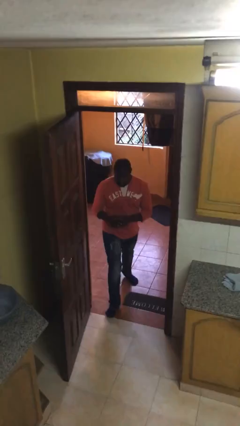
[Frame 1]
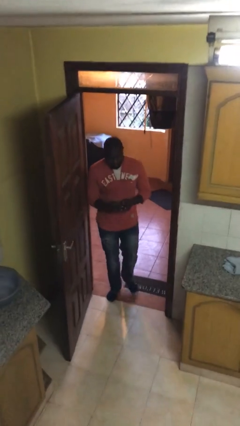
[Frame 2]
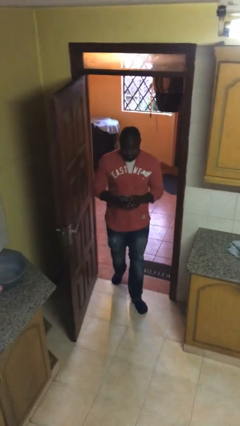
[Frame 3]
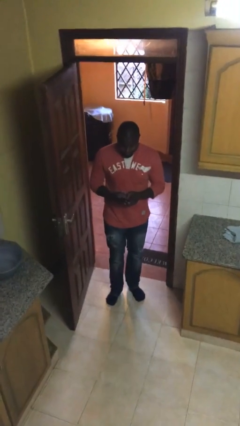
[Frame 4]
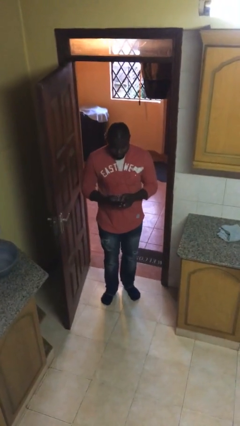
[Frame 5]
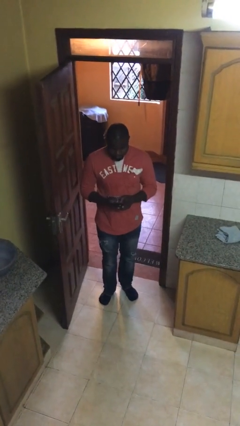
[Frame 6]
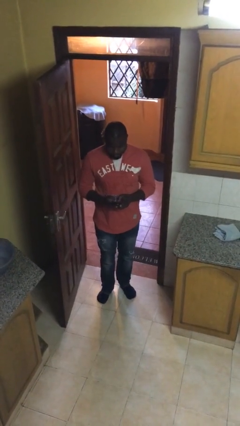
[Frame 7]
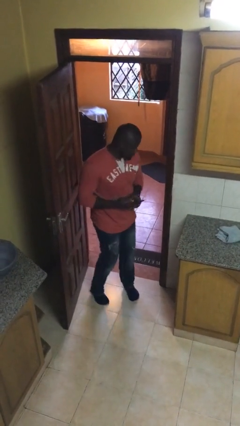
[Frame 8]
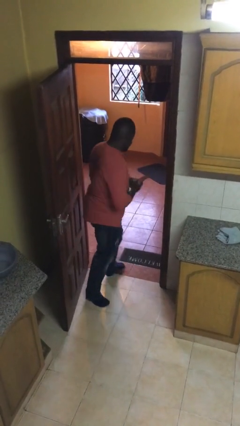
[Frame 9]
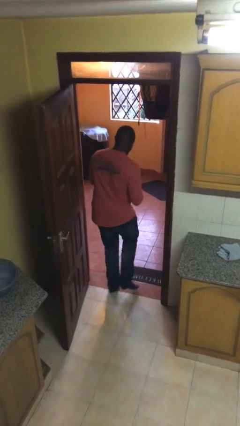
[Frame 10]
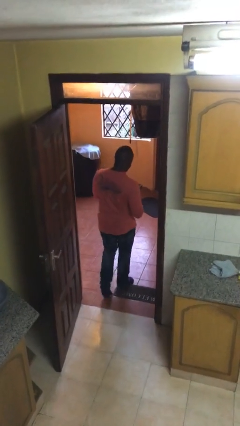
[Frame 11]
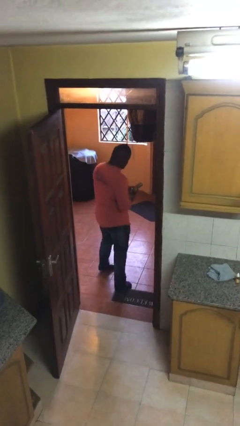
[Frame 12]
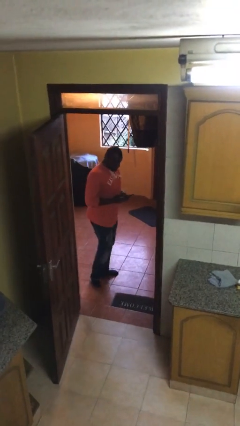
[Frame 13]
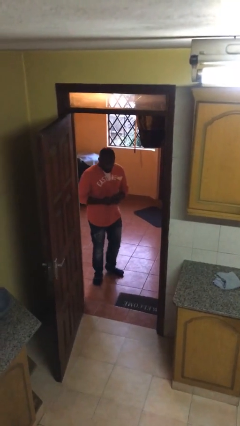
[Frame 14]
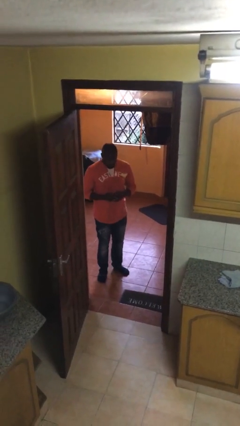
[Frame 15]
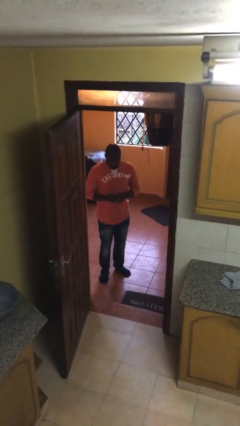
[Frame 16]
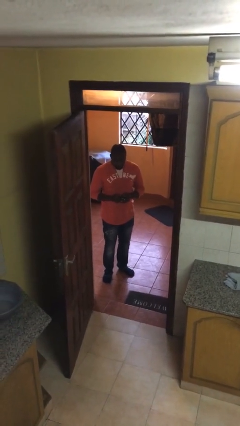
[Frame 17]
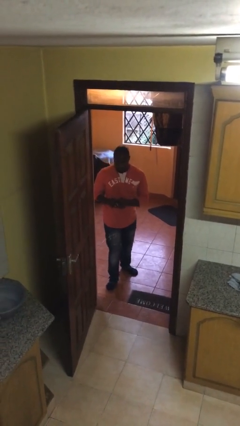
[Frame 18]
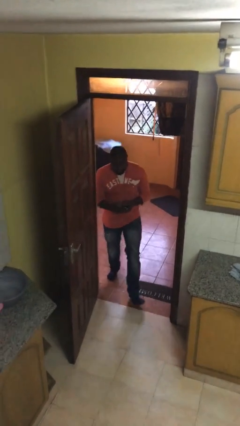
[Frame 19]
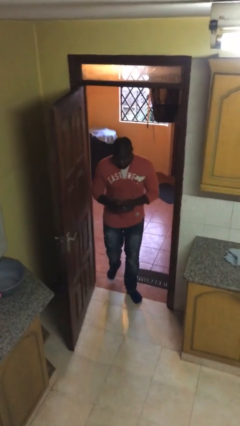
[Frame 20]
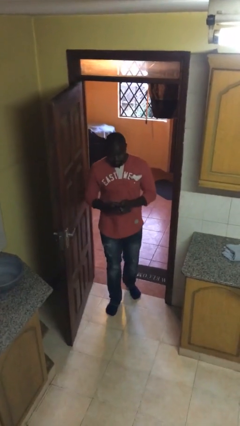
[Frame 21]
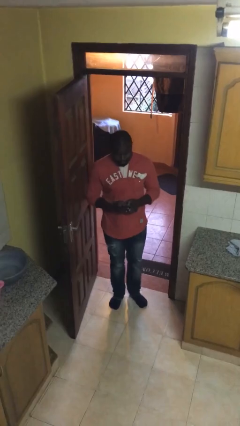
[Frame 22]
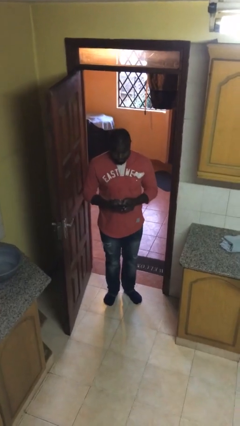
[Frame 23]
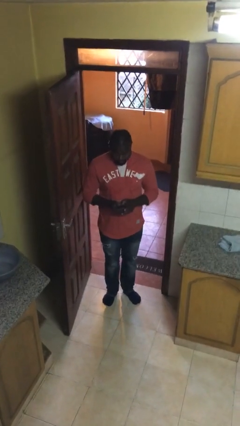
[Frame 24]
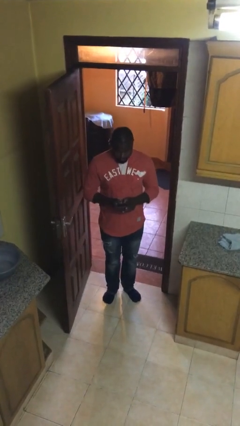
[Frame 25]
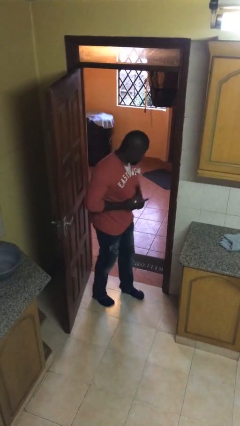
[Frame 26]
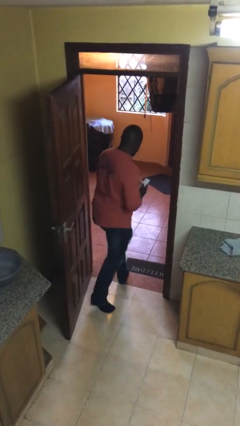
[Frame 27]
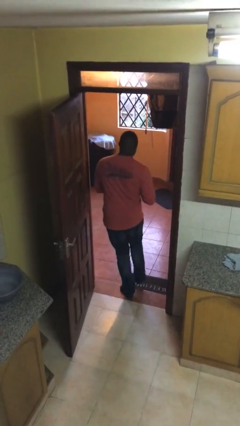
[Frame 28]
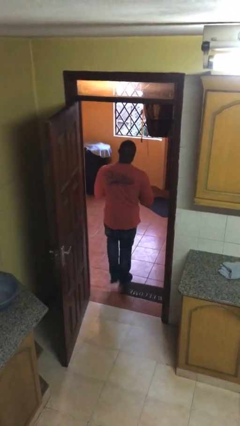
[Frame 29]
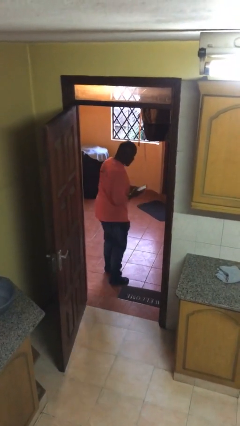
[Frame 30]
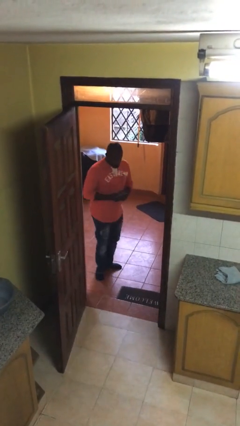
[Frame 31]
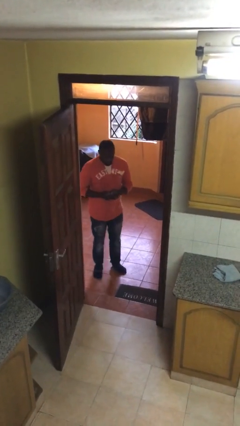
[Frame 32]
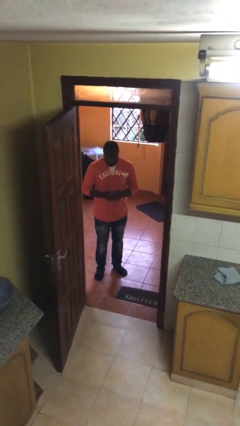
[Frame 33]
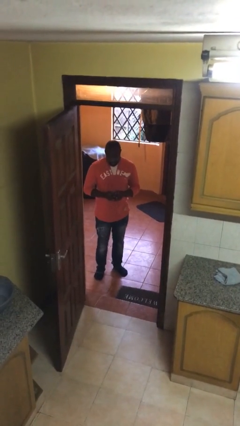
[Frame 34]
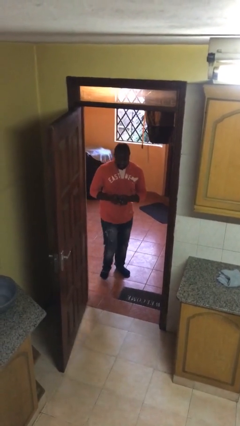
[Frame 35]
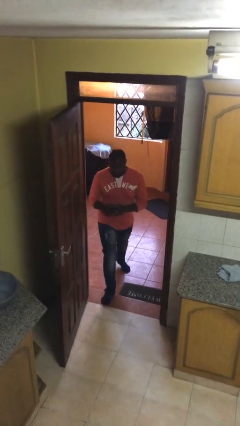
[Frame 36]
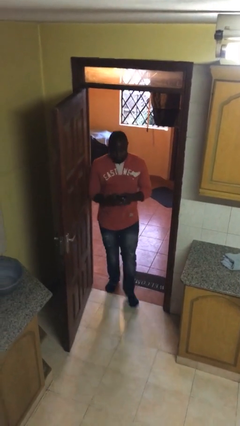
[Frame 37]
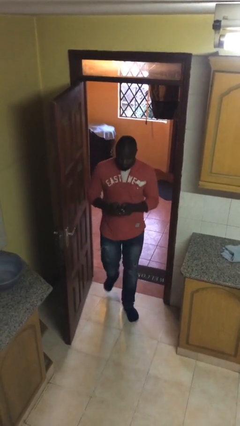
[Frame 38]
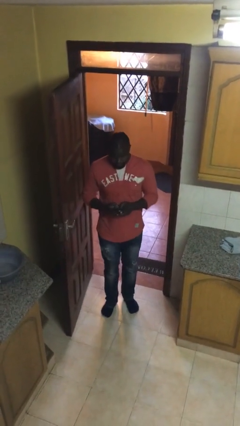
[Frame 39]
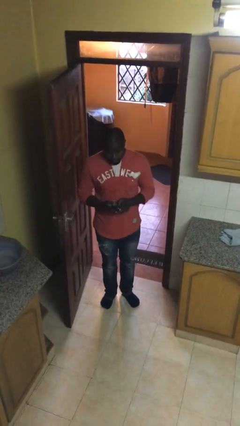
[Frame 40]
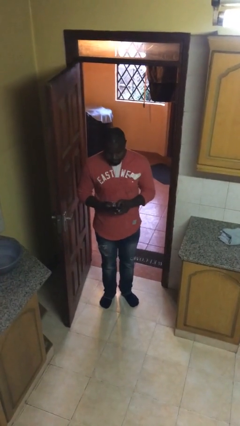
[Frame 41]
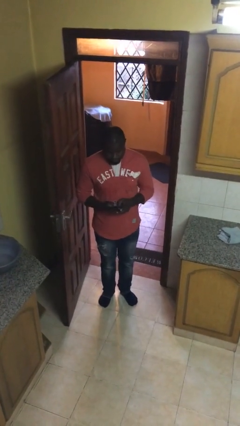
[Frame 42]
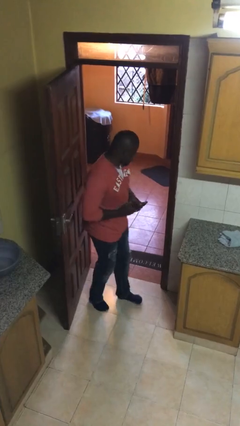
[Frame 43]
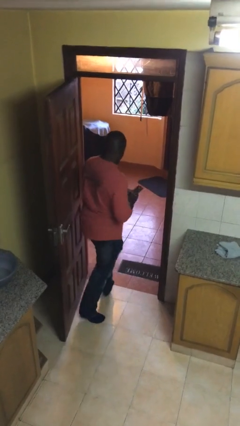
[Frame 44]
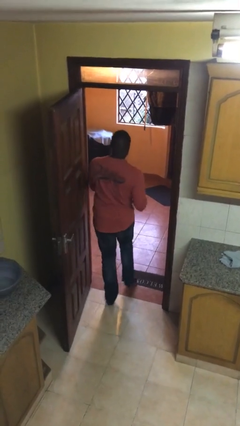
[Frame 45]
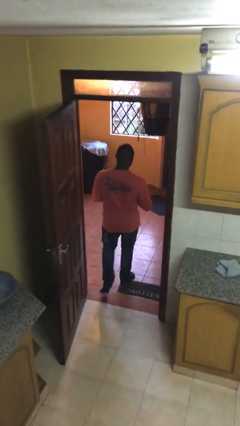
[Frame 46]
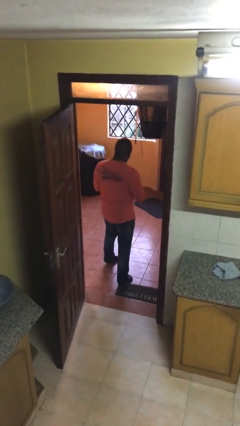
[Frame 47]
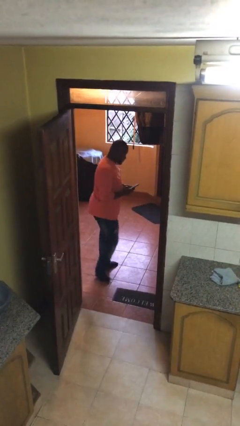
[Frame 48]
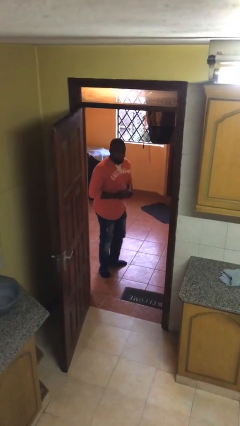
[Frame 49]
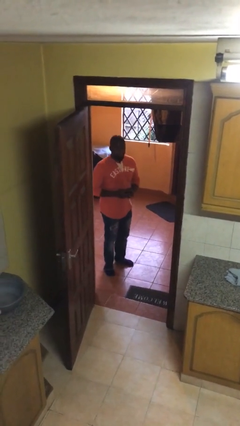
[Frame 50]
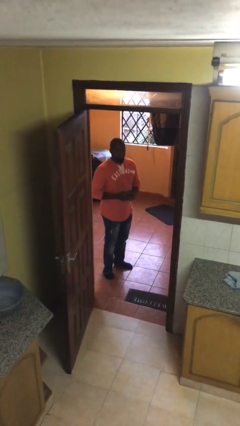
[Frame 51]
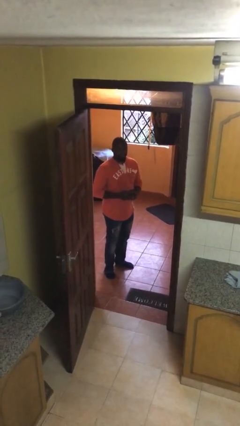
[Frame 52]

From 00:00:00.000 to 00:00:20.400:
person texts on phone

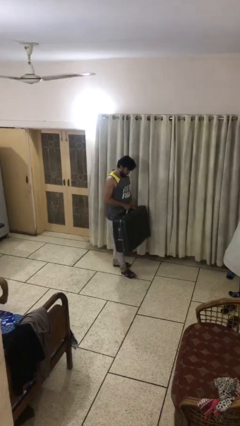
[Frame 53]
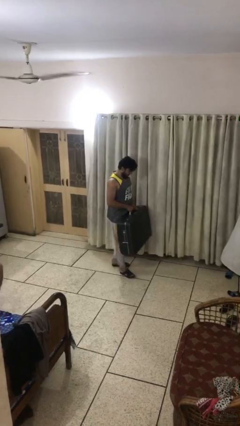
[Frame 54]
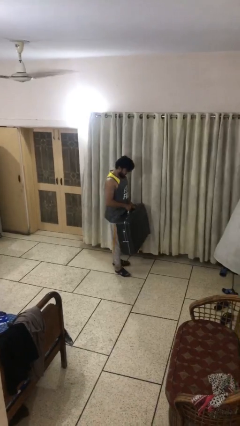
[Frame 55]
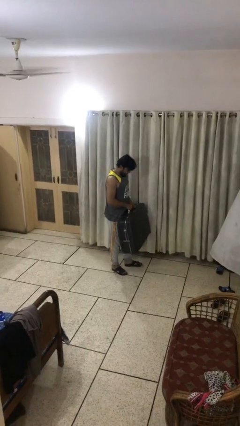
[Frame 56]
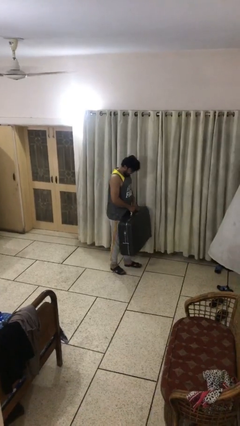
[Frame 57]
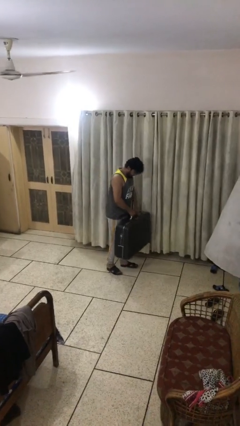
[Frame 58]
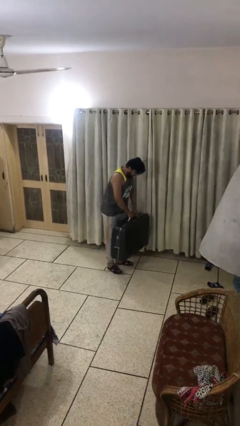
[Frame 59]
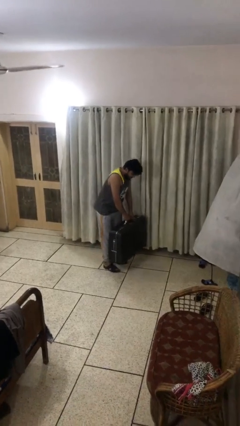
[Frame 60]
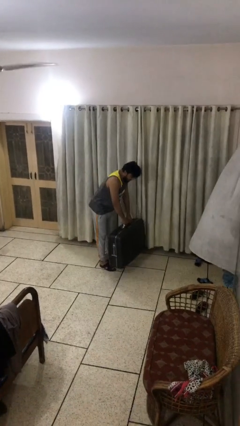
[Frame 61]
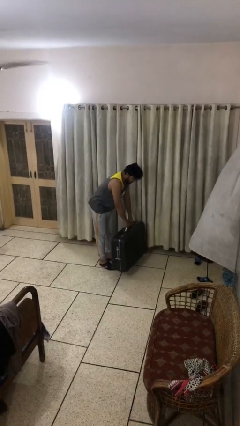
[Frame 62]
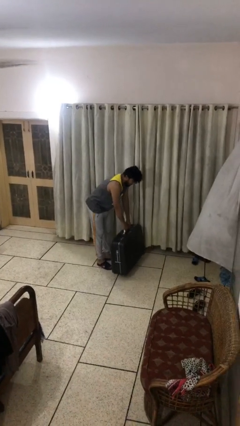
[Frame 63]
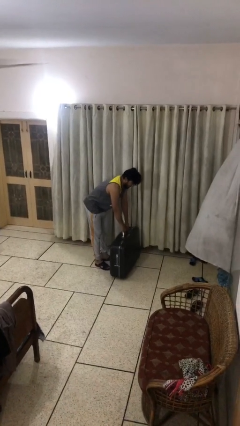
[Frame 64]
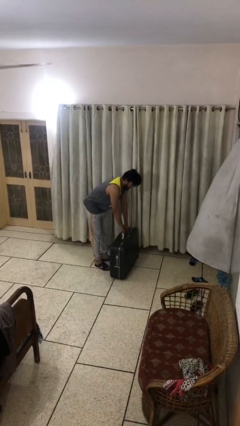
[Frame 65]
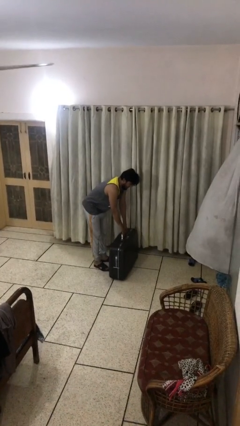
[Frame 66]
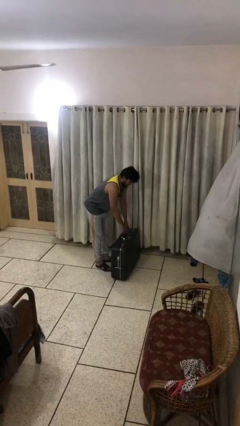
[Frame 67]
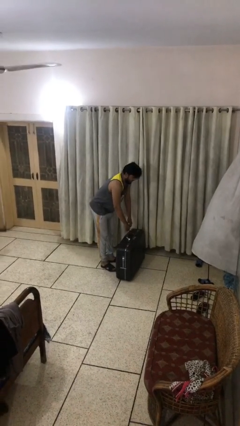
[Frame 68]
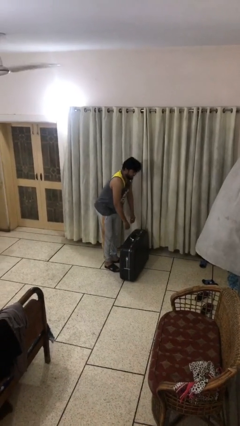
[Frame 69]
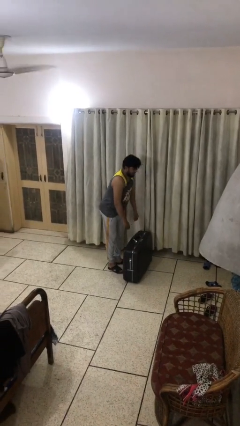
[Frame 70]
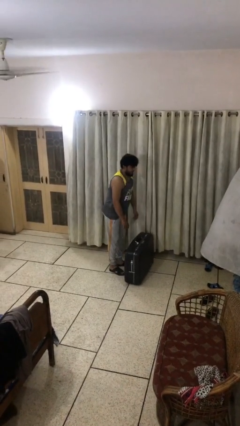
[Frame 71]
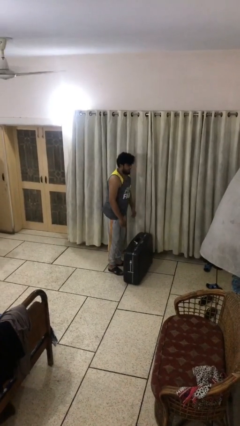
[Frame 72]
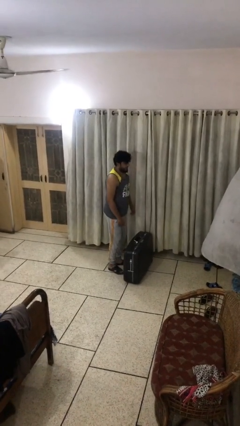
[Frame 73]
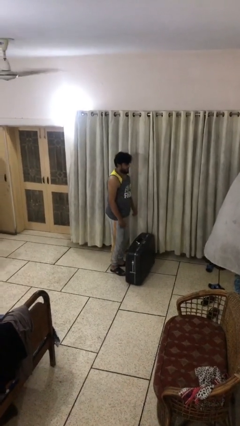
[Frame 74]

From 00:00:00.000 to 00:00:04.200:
person puts down object on floor

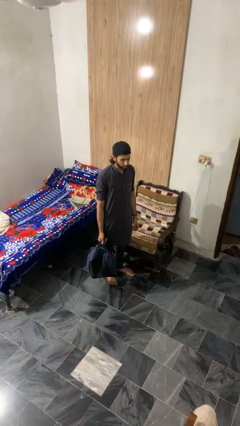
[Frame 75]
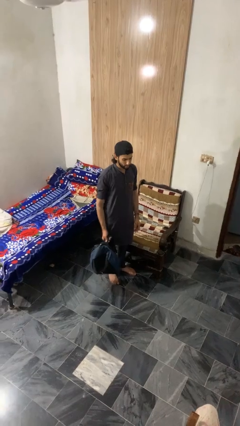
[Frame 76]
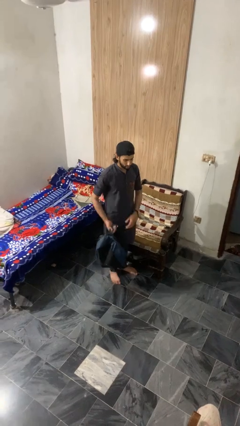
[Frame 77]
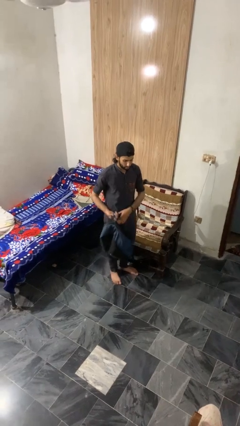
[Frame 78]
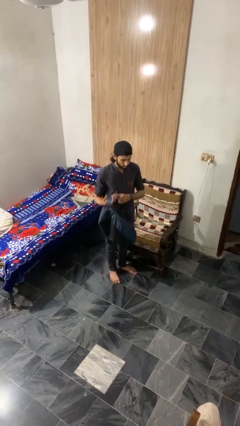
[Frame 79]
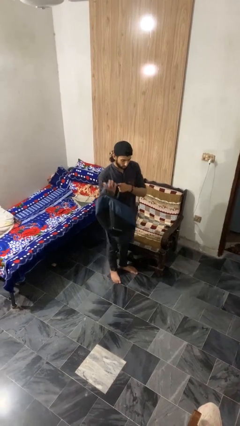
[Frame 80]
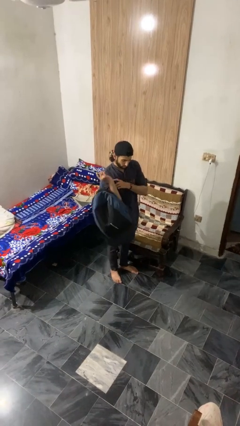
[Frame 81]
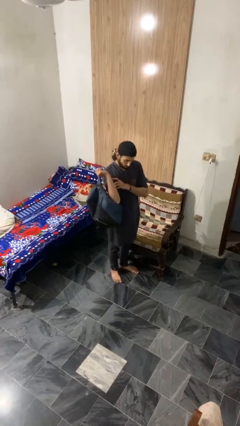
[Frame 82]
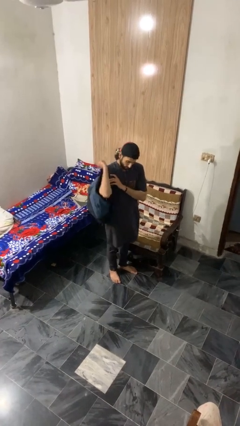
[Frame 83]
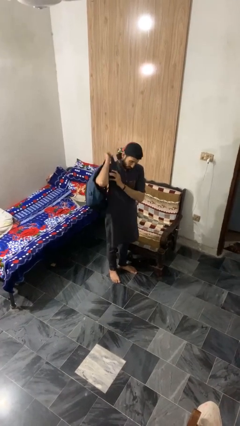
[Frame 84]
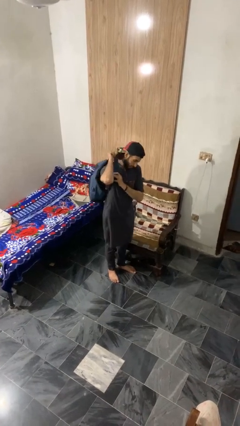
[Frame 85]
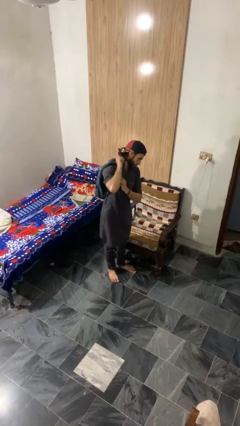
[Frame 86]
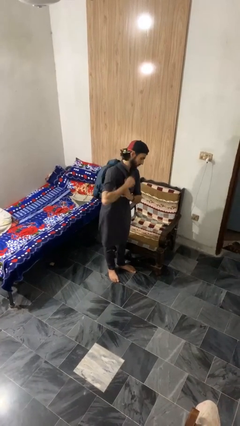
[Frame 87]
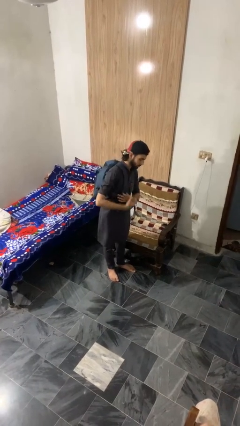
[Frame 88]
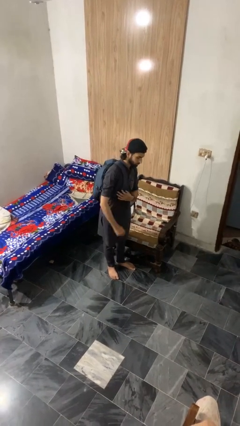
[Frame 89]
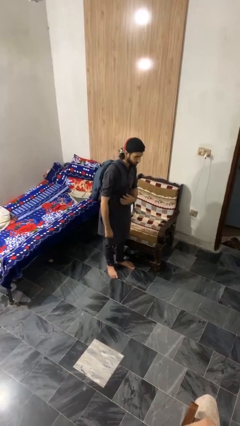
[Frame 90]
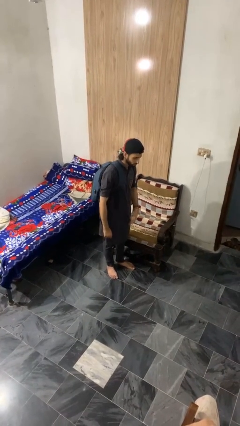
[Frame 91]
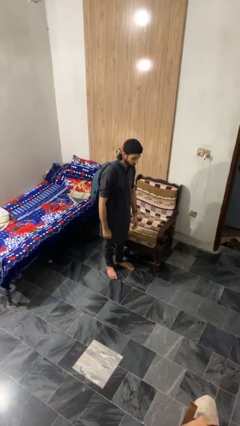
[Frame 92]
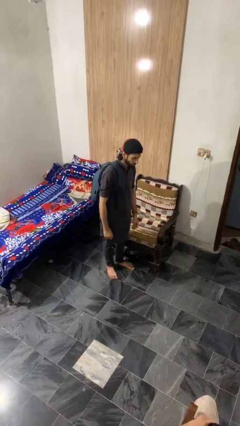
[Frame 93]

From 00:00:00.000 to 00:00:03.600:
person puts on backpack
